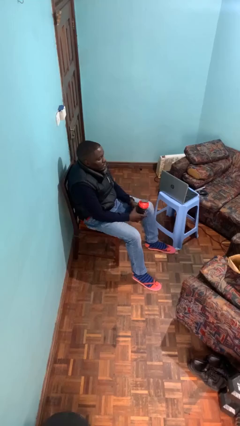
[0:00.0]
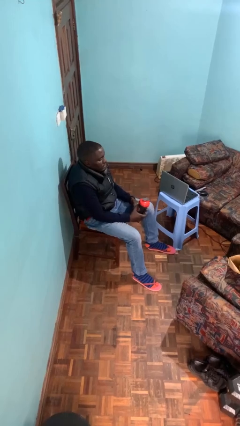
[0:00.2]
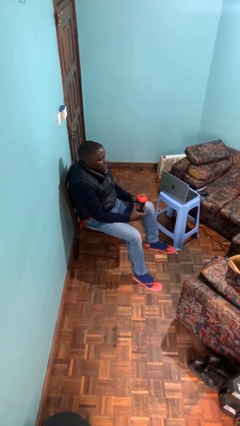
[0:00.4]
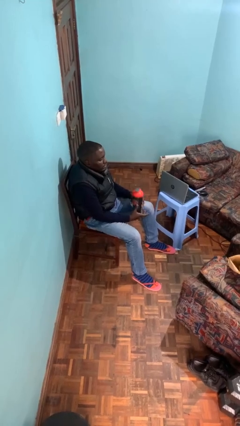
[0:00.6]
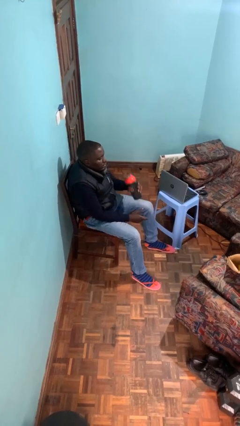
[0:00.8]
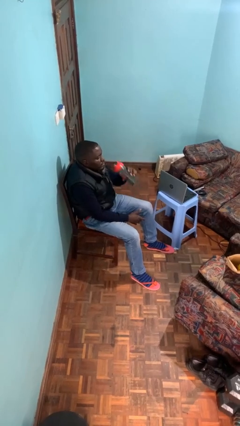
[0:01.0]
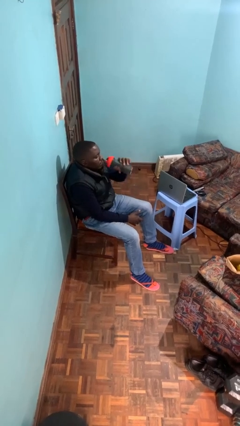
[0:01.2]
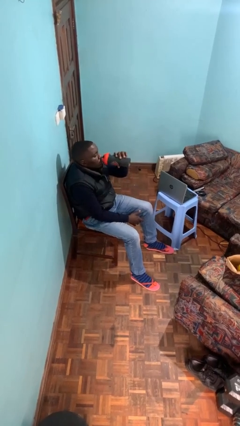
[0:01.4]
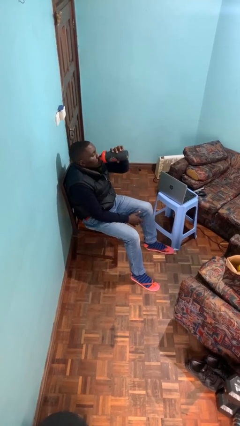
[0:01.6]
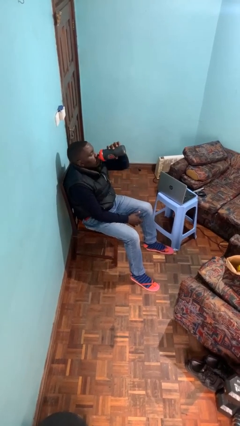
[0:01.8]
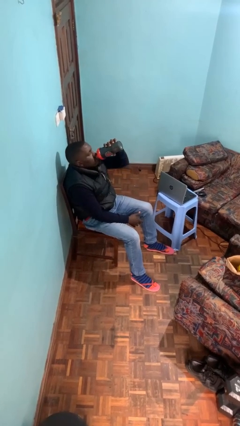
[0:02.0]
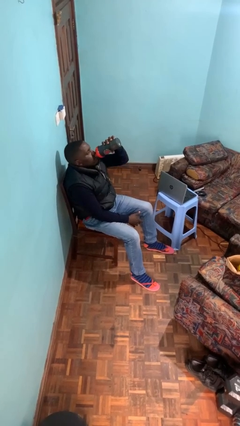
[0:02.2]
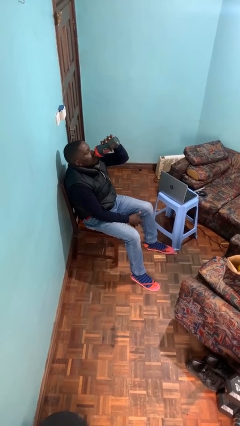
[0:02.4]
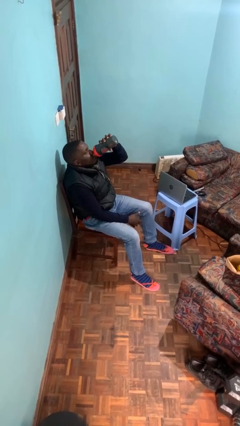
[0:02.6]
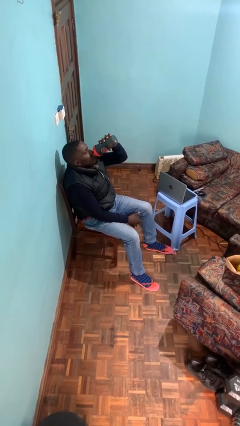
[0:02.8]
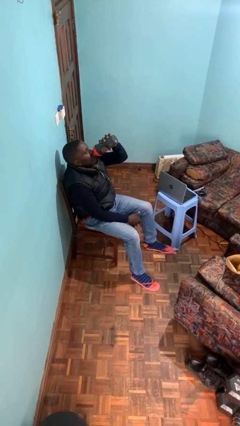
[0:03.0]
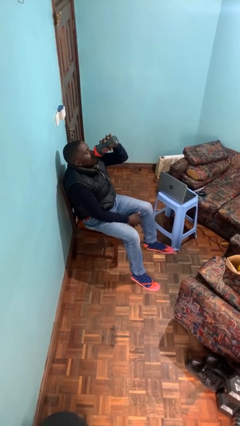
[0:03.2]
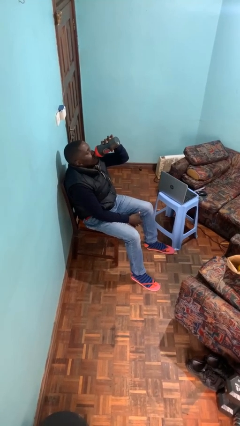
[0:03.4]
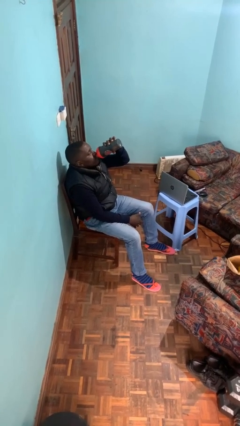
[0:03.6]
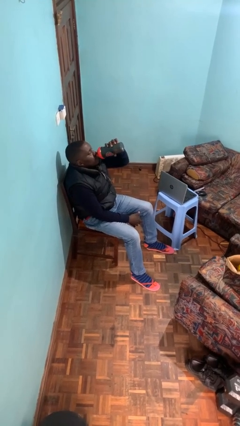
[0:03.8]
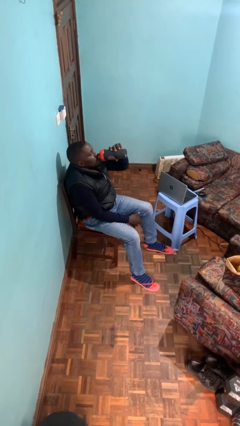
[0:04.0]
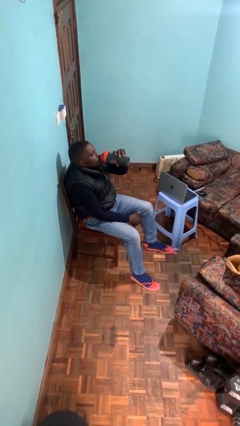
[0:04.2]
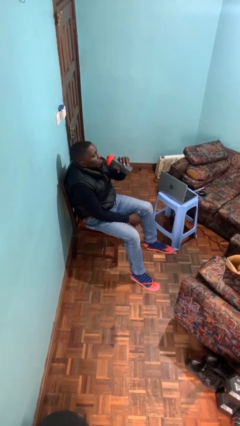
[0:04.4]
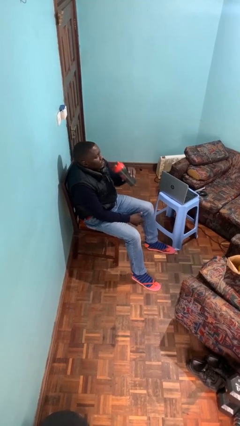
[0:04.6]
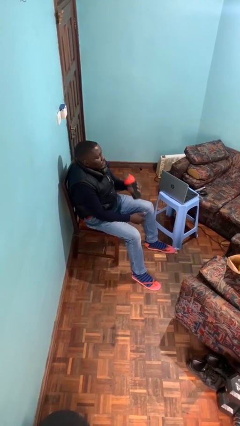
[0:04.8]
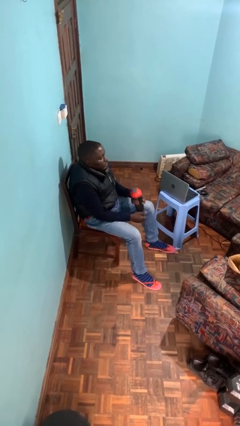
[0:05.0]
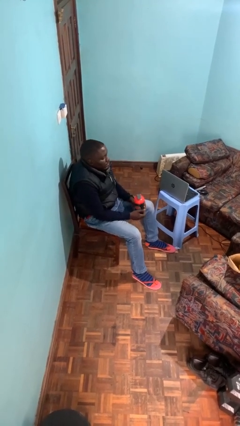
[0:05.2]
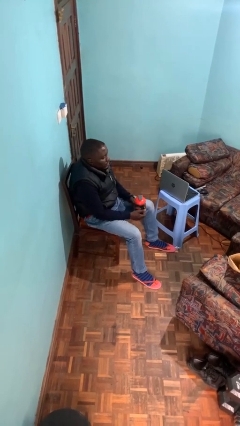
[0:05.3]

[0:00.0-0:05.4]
person drinks from bottle

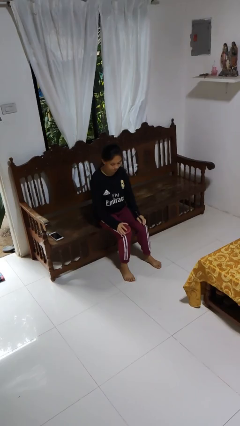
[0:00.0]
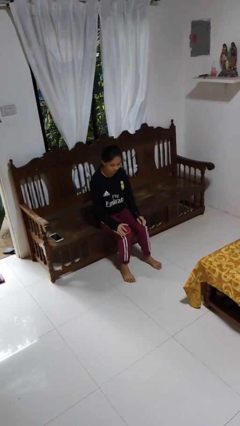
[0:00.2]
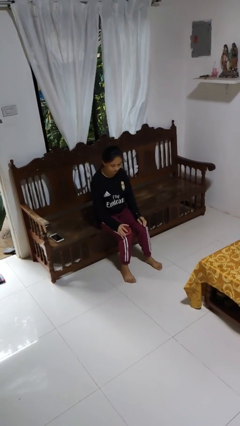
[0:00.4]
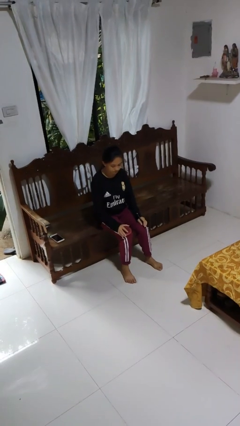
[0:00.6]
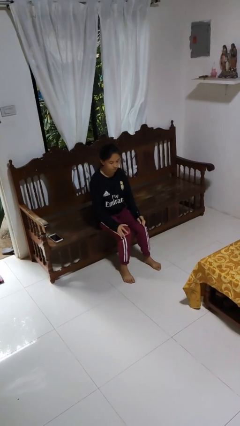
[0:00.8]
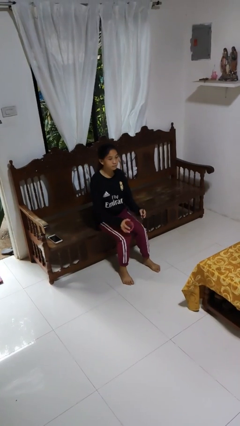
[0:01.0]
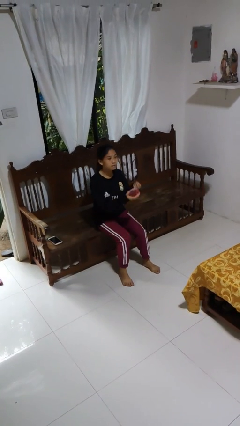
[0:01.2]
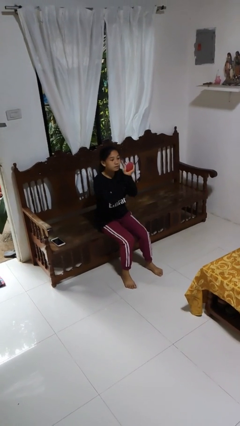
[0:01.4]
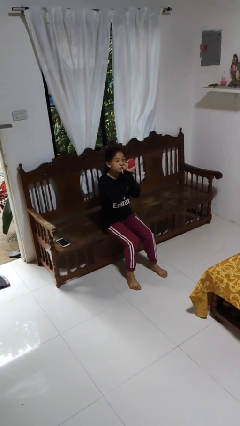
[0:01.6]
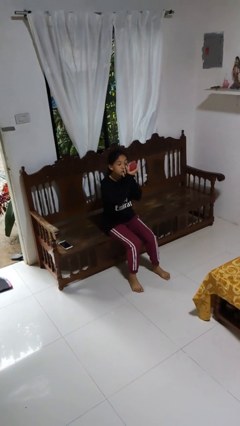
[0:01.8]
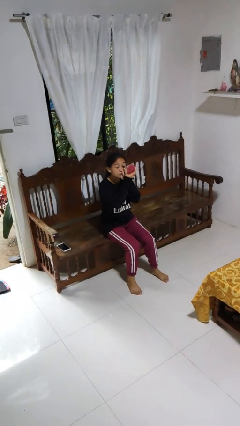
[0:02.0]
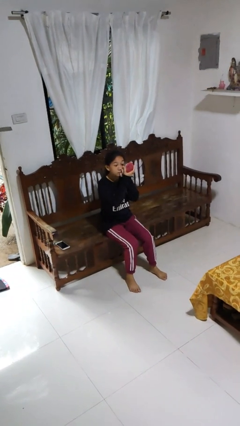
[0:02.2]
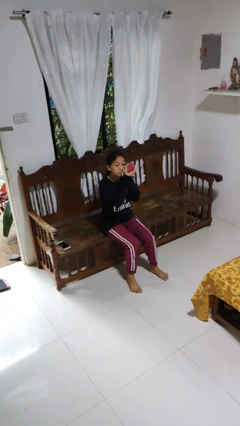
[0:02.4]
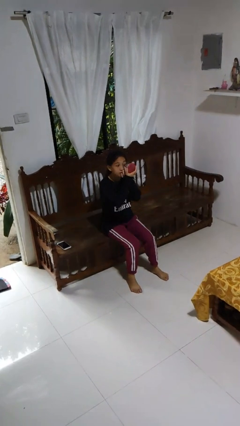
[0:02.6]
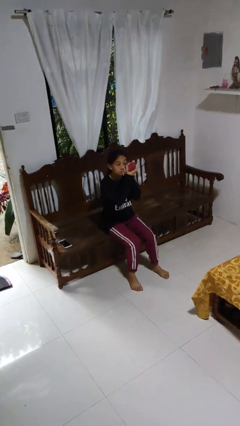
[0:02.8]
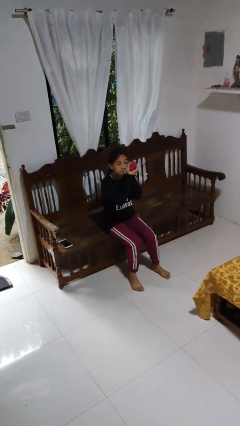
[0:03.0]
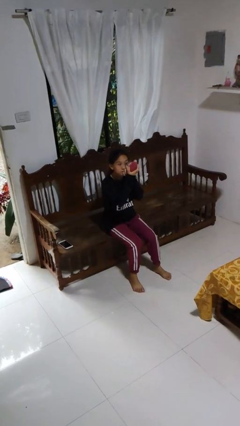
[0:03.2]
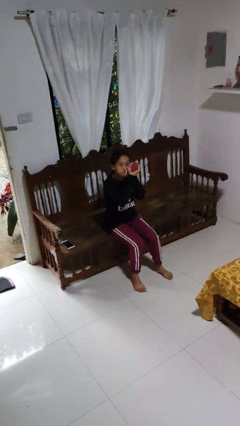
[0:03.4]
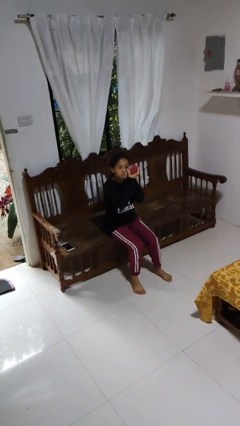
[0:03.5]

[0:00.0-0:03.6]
person applies eye makeup

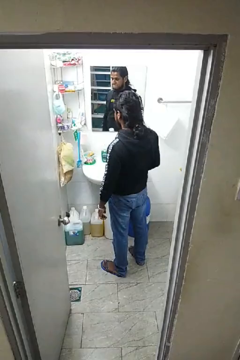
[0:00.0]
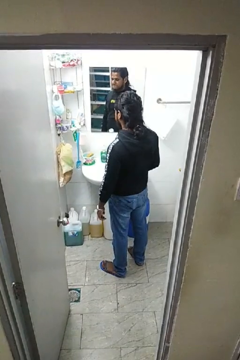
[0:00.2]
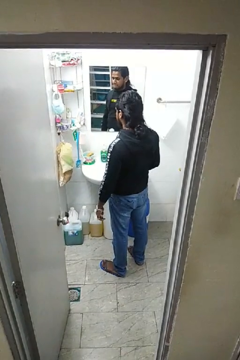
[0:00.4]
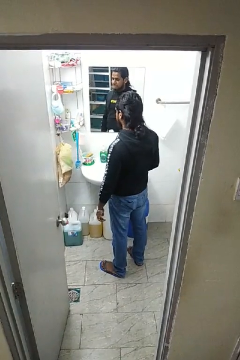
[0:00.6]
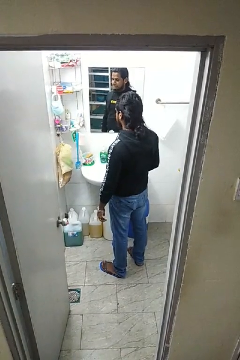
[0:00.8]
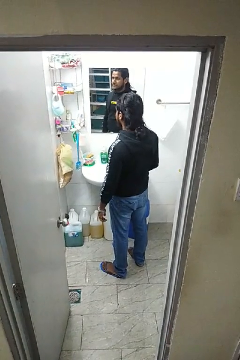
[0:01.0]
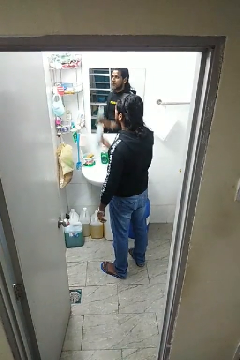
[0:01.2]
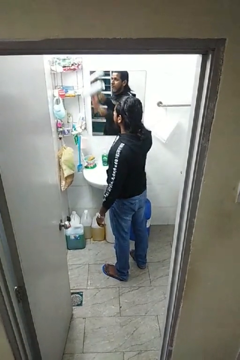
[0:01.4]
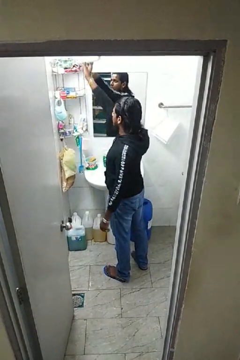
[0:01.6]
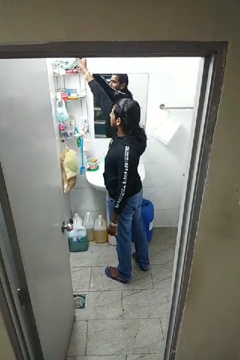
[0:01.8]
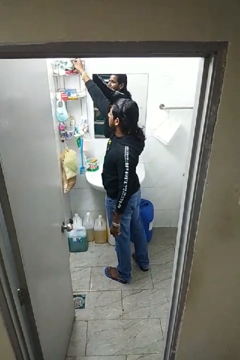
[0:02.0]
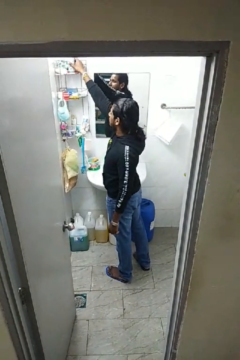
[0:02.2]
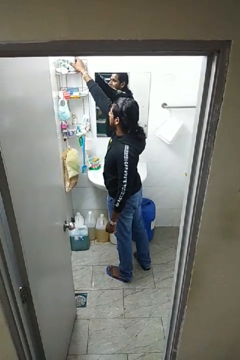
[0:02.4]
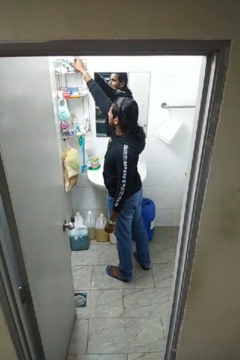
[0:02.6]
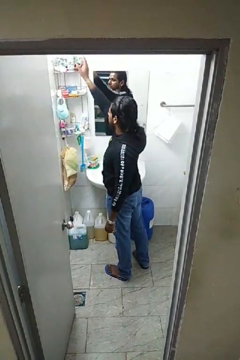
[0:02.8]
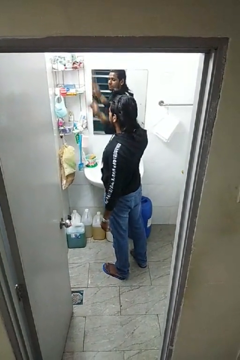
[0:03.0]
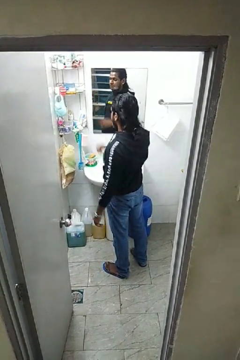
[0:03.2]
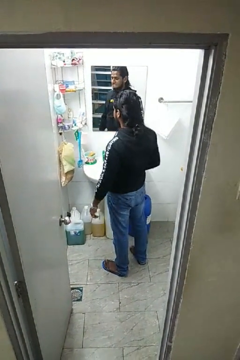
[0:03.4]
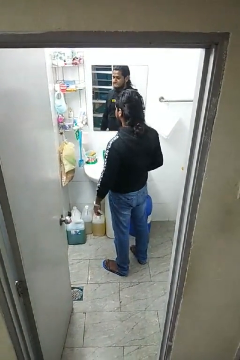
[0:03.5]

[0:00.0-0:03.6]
person puts down object on countertop

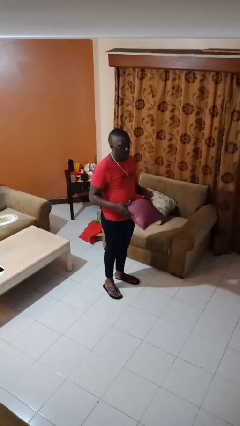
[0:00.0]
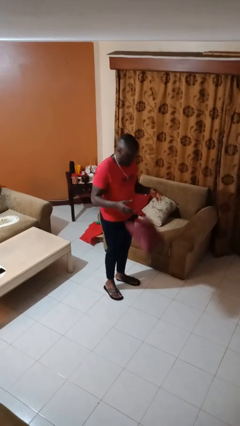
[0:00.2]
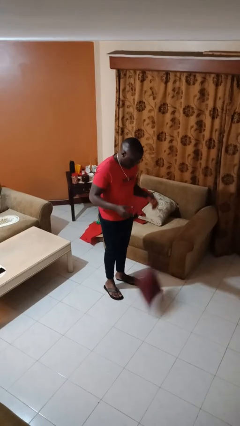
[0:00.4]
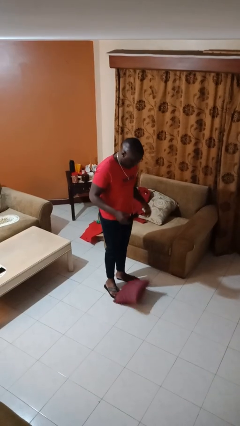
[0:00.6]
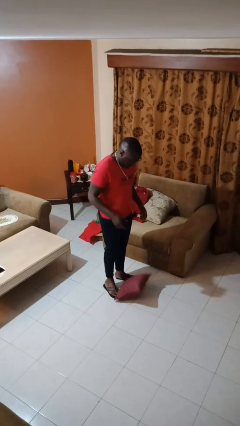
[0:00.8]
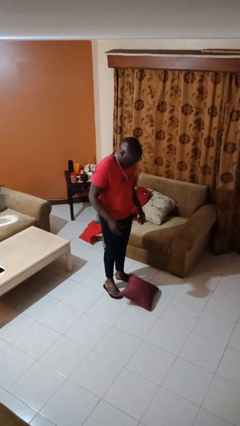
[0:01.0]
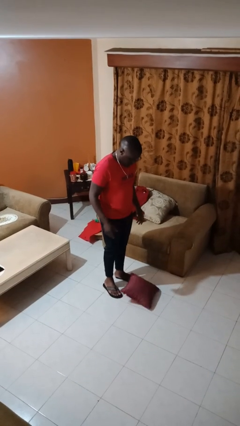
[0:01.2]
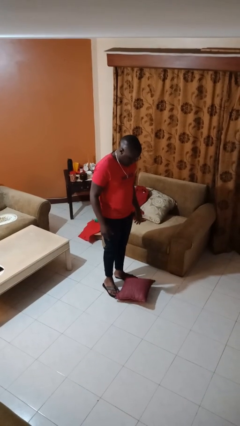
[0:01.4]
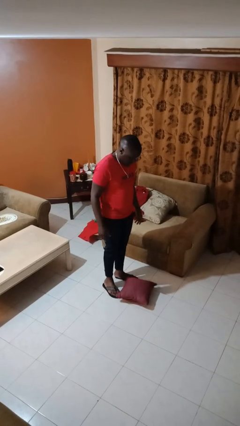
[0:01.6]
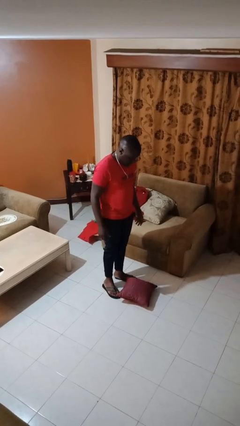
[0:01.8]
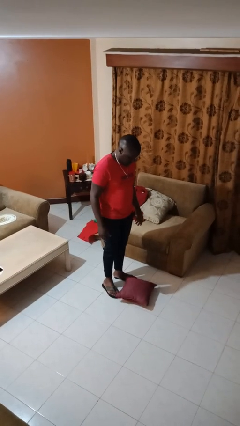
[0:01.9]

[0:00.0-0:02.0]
person drops object

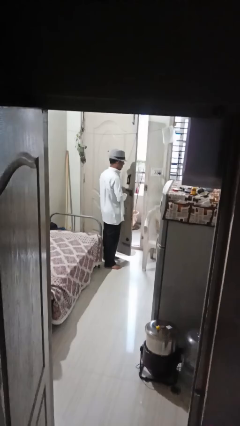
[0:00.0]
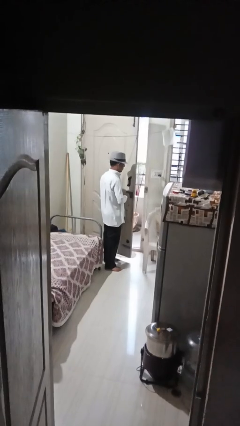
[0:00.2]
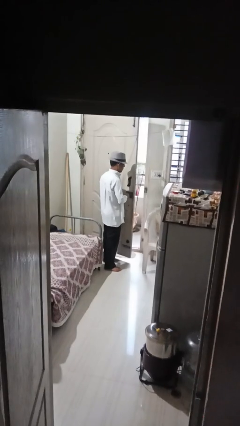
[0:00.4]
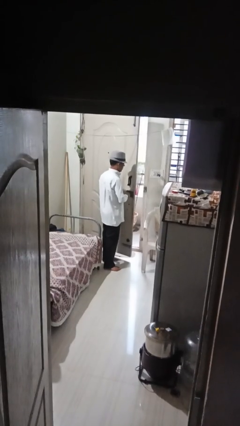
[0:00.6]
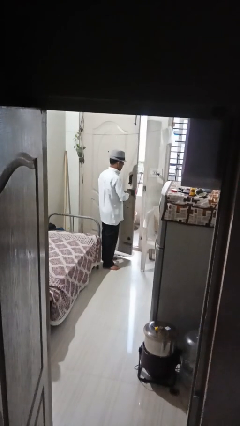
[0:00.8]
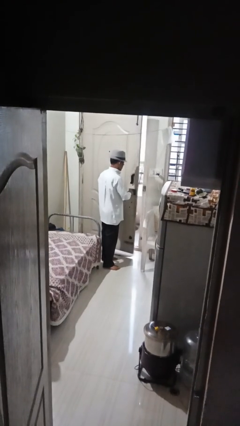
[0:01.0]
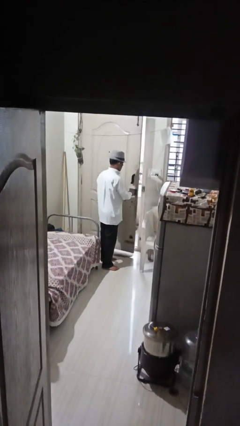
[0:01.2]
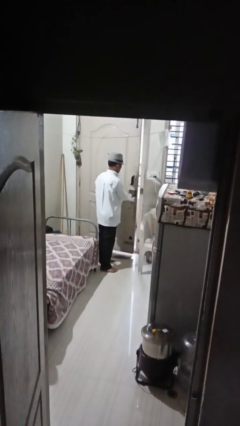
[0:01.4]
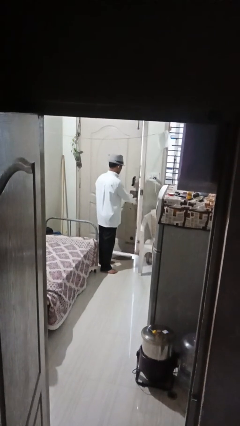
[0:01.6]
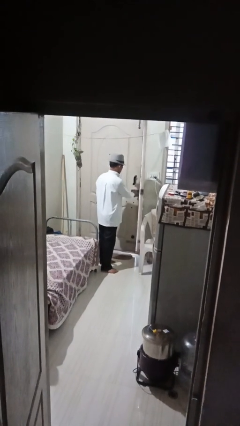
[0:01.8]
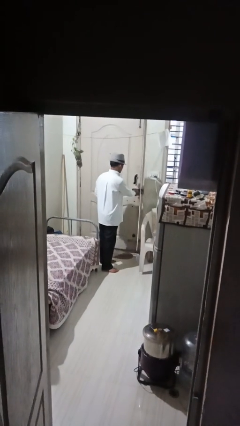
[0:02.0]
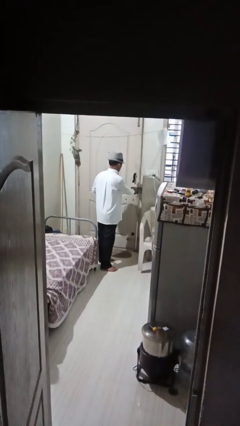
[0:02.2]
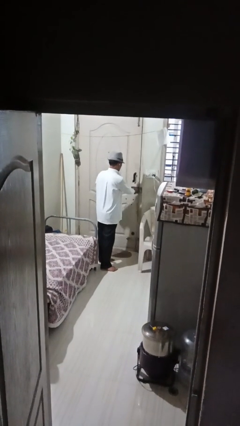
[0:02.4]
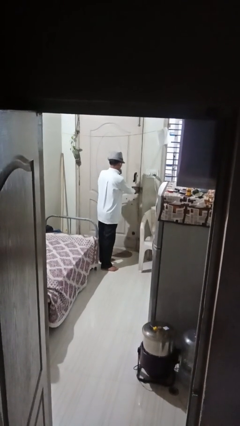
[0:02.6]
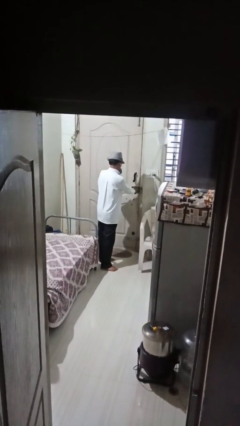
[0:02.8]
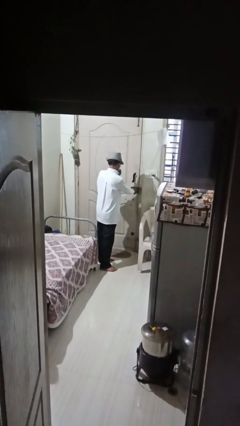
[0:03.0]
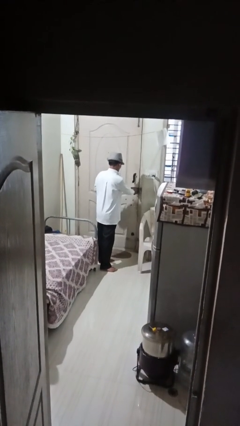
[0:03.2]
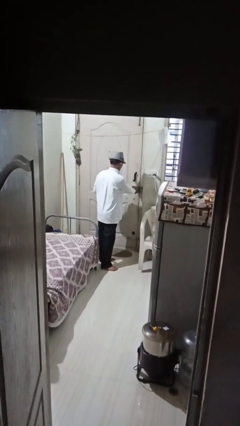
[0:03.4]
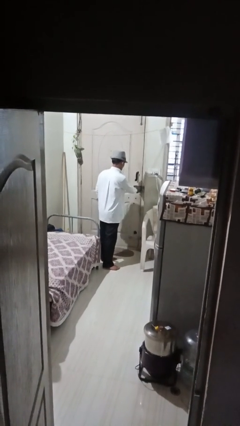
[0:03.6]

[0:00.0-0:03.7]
person closes facility door
